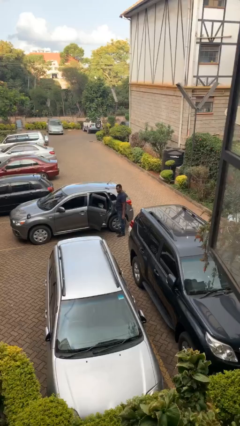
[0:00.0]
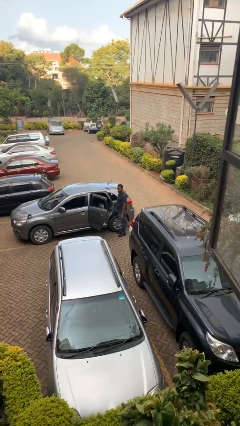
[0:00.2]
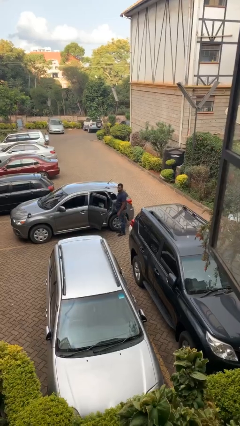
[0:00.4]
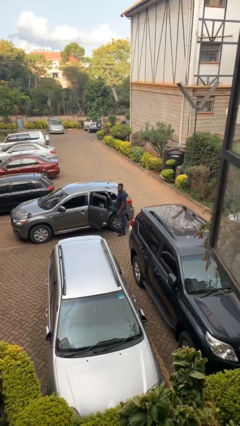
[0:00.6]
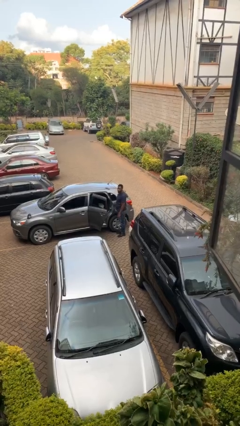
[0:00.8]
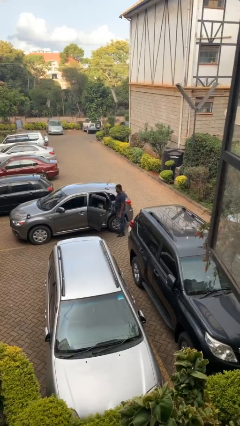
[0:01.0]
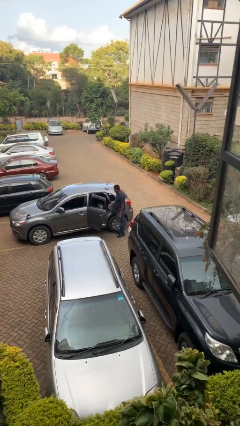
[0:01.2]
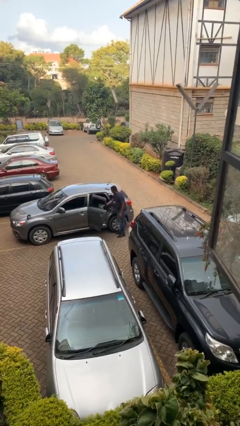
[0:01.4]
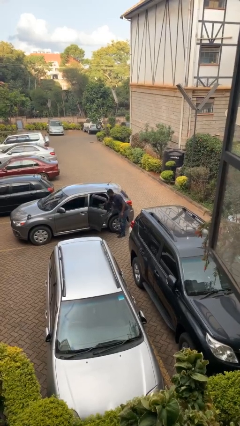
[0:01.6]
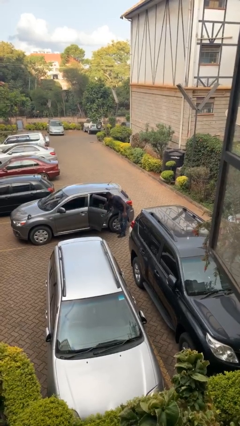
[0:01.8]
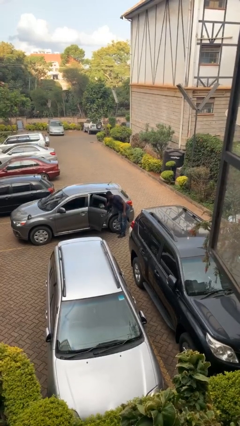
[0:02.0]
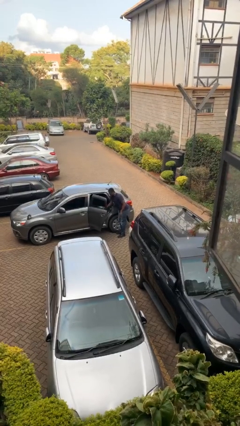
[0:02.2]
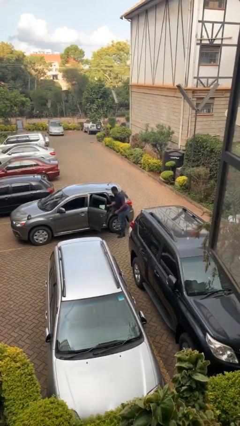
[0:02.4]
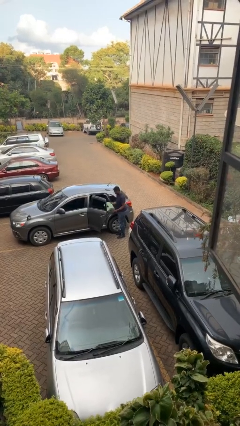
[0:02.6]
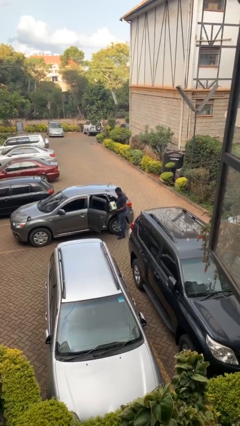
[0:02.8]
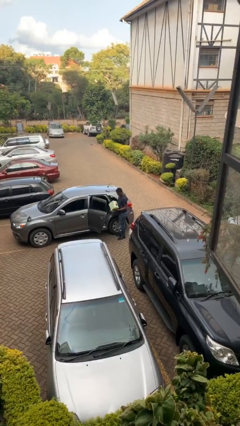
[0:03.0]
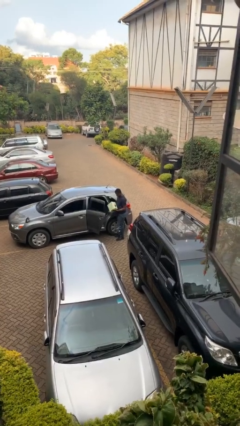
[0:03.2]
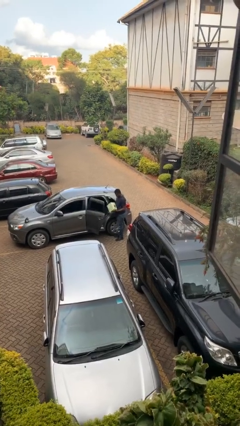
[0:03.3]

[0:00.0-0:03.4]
person unloads car

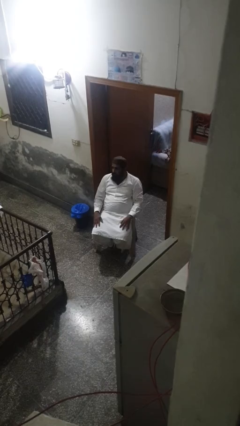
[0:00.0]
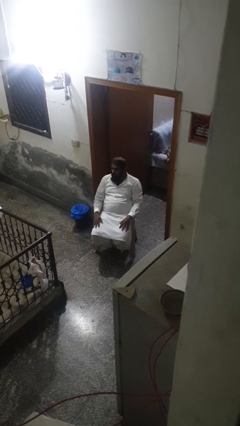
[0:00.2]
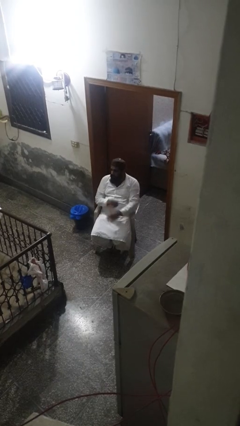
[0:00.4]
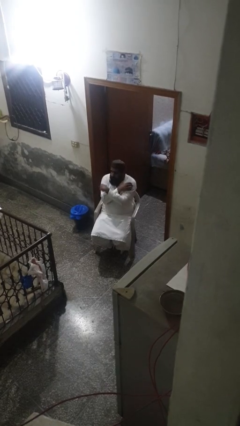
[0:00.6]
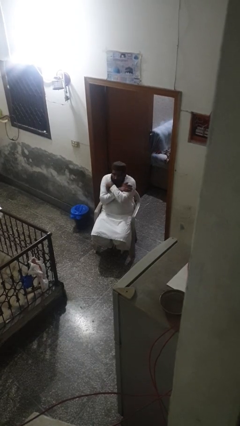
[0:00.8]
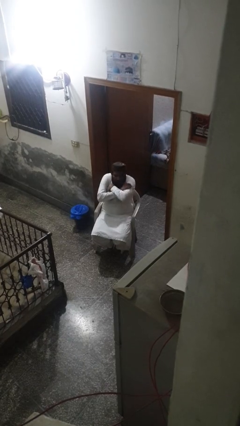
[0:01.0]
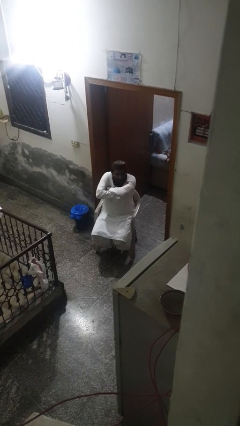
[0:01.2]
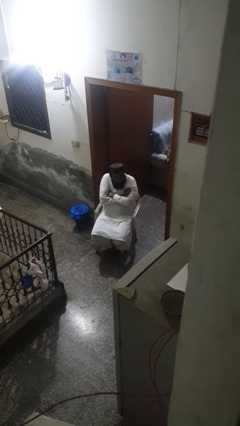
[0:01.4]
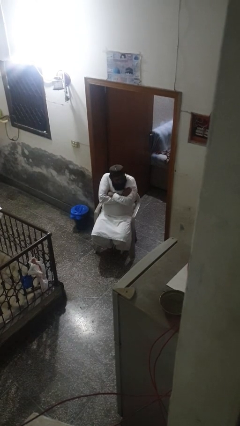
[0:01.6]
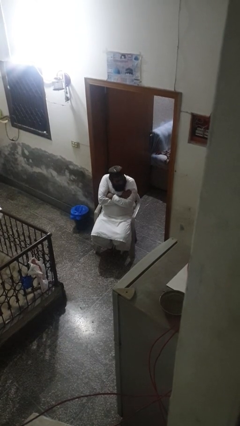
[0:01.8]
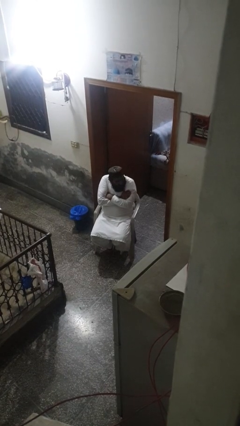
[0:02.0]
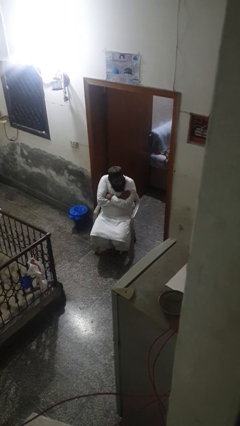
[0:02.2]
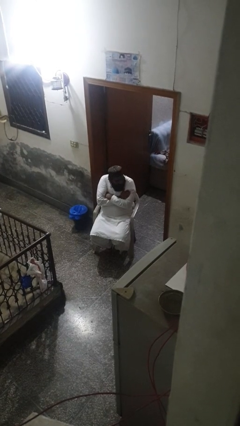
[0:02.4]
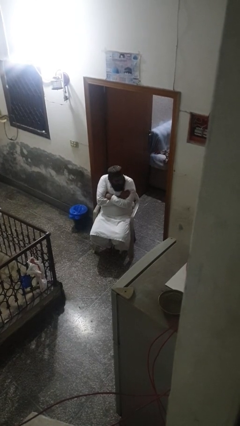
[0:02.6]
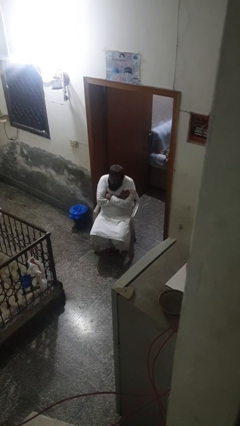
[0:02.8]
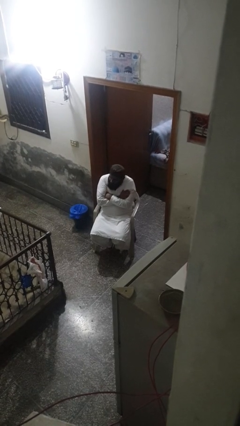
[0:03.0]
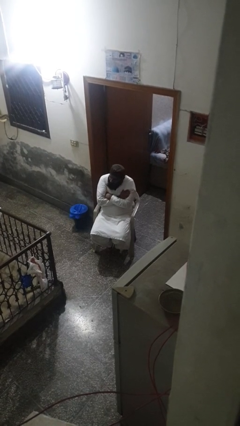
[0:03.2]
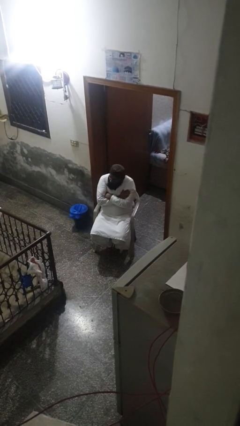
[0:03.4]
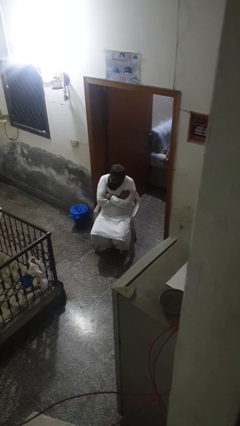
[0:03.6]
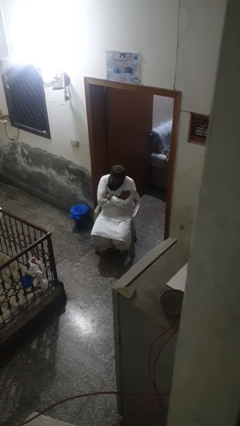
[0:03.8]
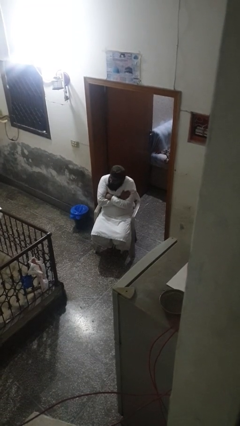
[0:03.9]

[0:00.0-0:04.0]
person crosses arms

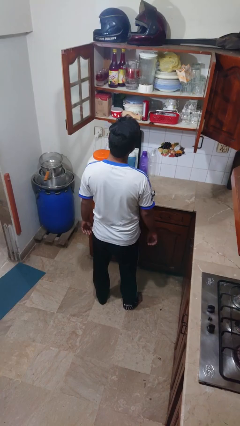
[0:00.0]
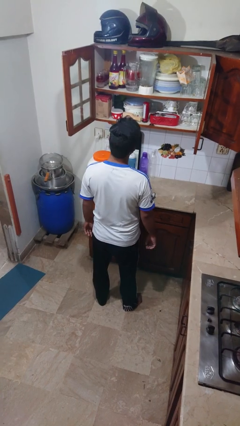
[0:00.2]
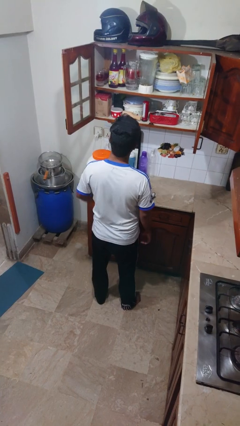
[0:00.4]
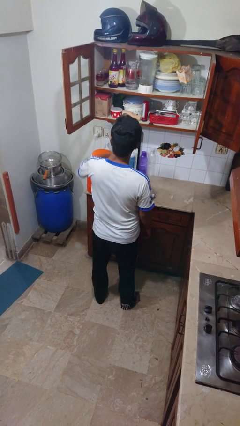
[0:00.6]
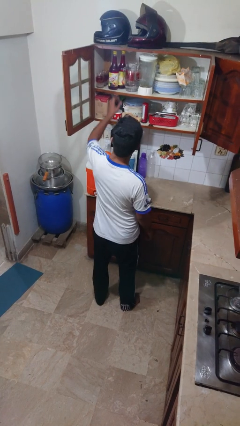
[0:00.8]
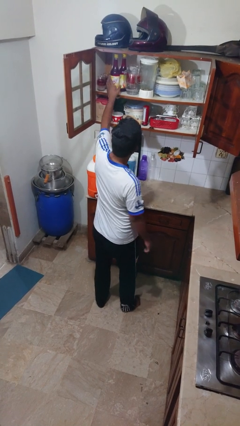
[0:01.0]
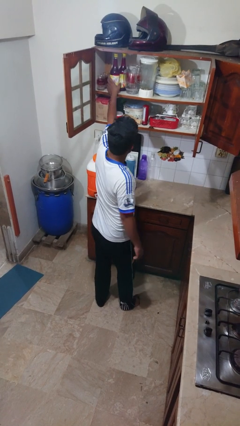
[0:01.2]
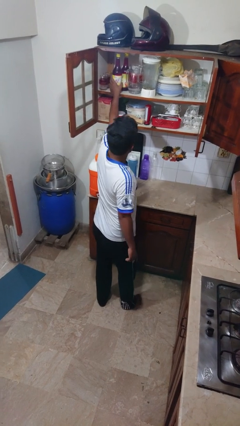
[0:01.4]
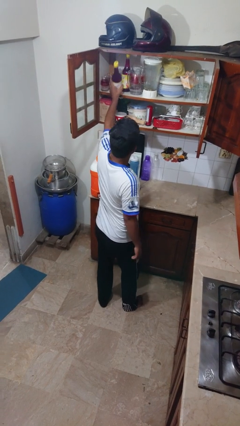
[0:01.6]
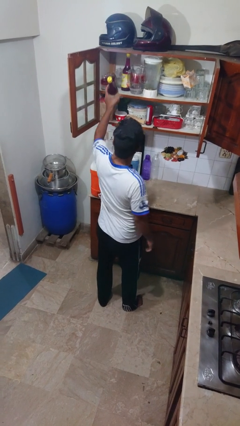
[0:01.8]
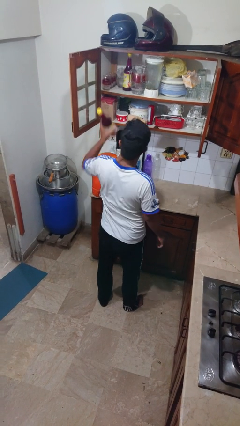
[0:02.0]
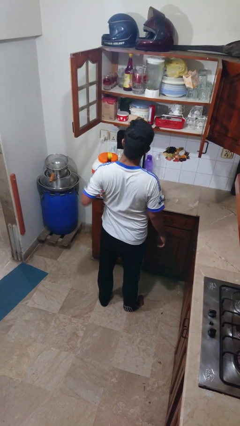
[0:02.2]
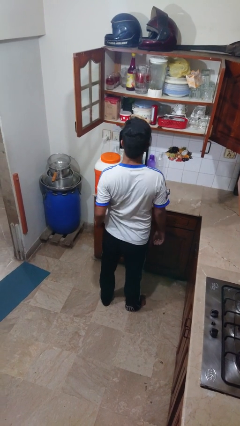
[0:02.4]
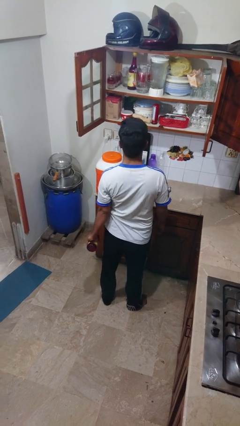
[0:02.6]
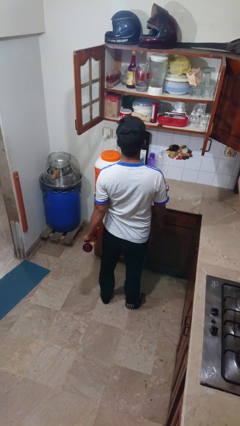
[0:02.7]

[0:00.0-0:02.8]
person picks up object from cabinet

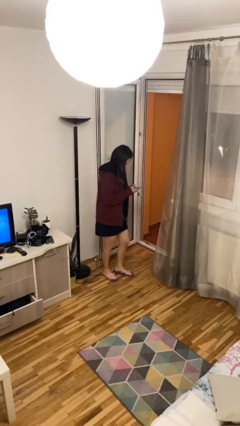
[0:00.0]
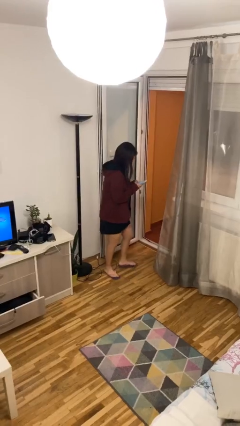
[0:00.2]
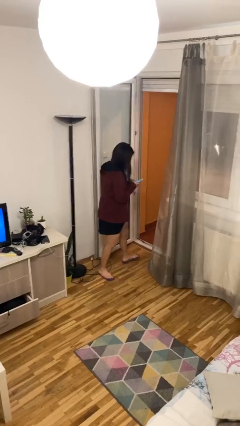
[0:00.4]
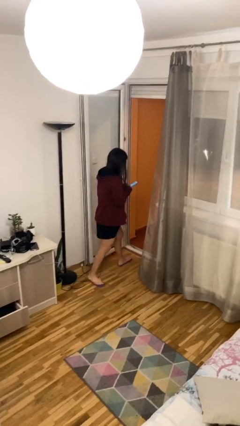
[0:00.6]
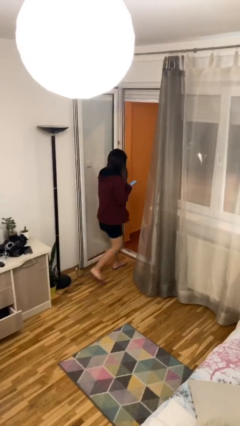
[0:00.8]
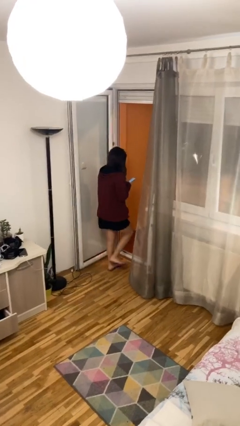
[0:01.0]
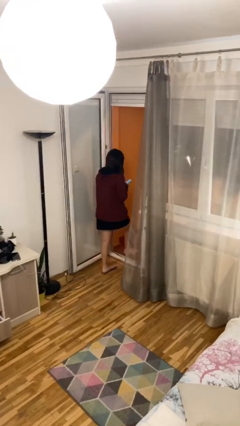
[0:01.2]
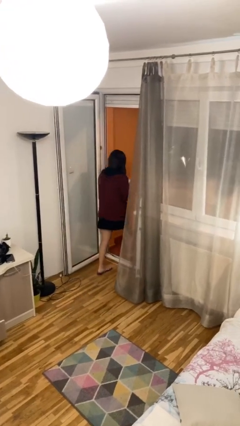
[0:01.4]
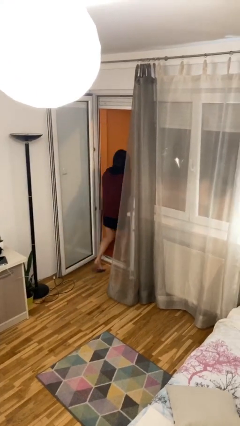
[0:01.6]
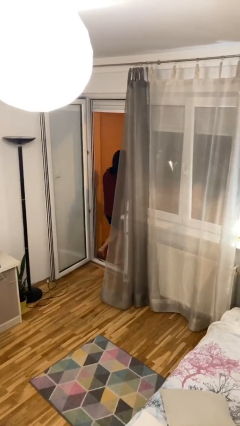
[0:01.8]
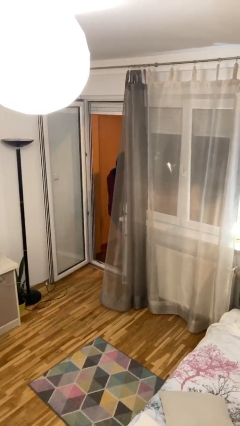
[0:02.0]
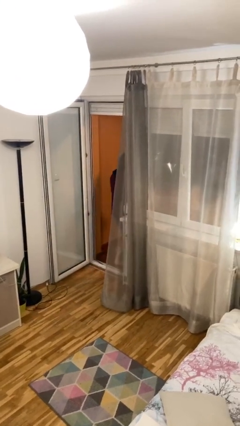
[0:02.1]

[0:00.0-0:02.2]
person exits scene through structure

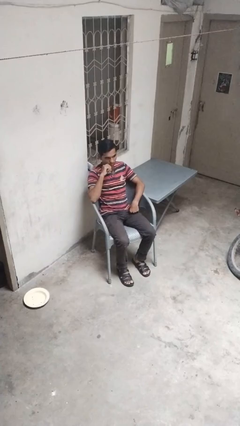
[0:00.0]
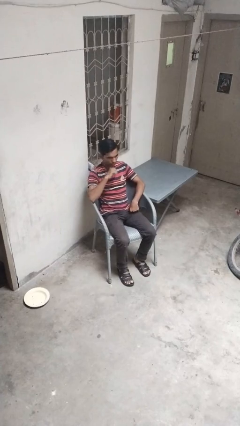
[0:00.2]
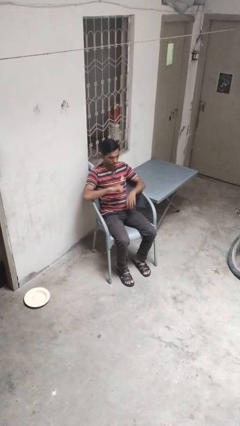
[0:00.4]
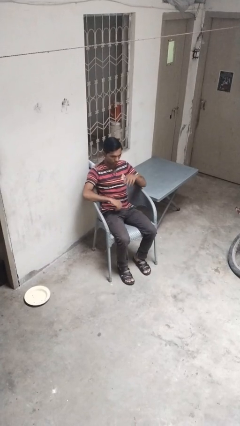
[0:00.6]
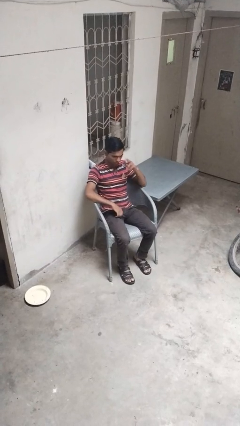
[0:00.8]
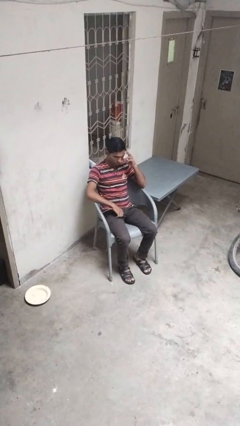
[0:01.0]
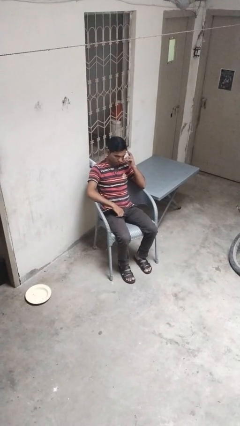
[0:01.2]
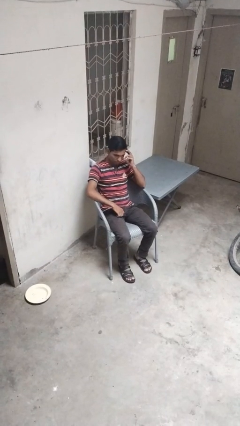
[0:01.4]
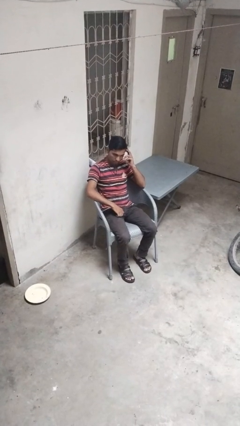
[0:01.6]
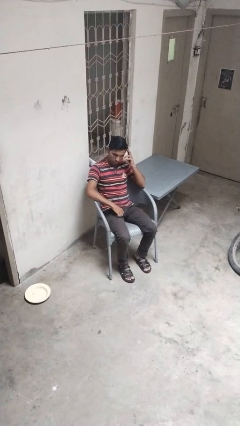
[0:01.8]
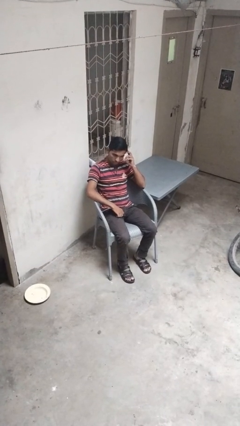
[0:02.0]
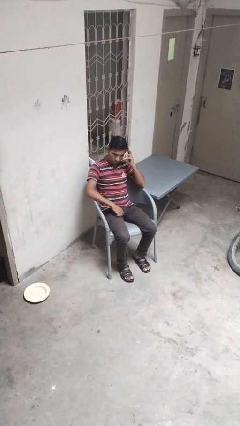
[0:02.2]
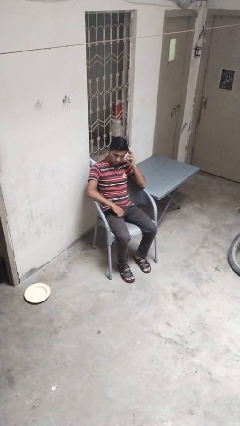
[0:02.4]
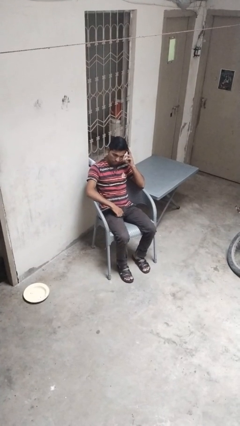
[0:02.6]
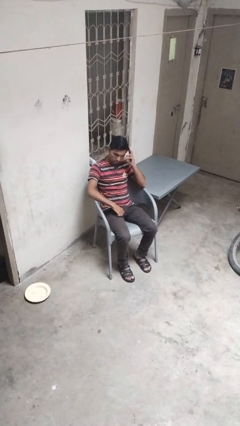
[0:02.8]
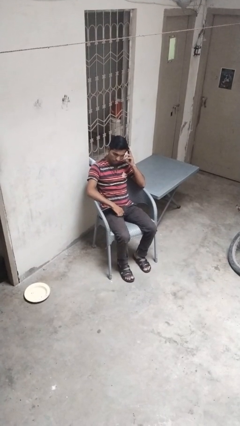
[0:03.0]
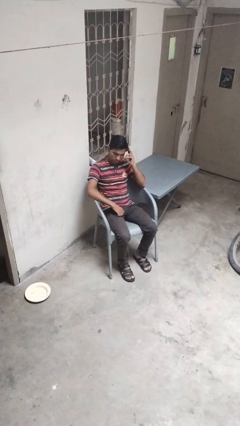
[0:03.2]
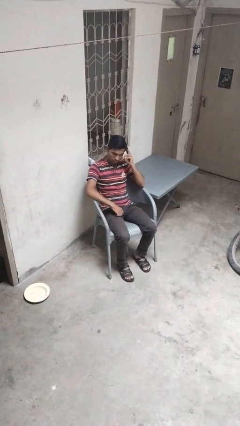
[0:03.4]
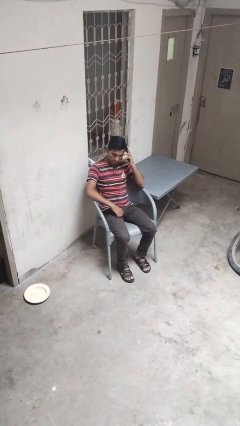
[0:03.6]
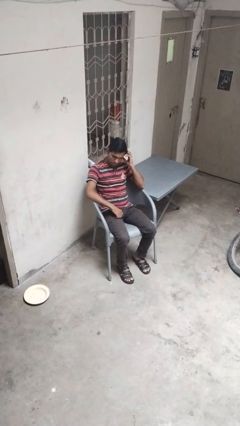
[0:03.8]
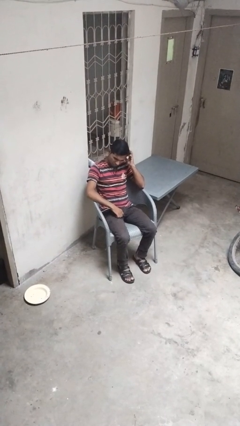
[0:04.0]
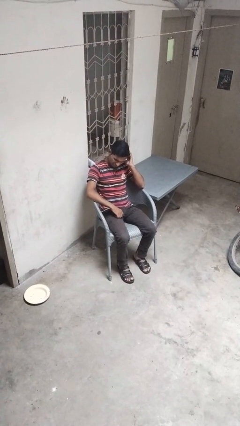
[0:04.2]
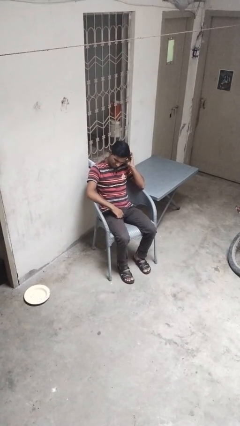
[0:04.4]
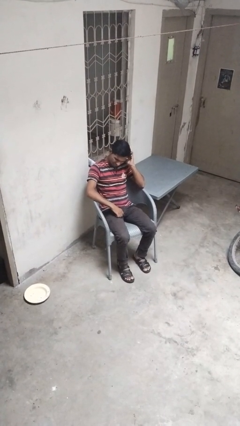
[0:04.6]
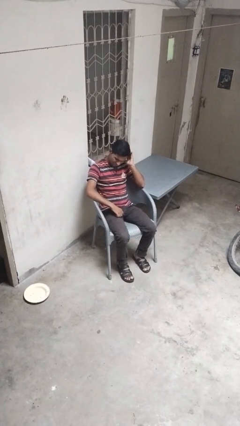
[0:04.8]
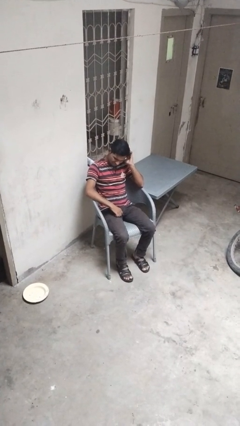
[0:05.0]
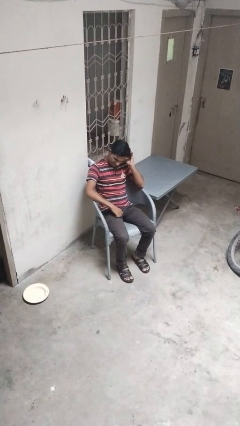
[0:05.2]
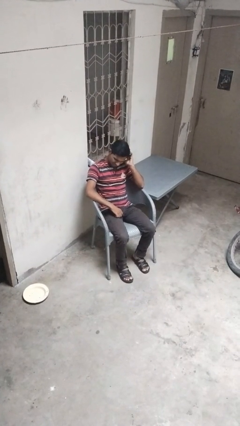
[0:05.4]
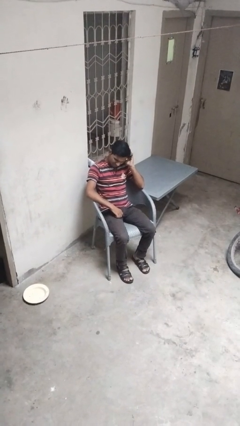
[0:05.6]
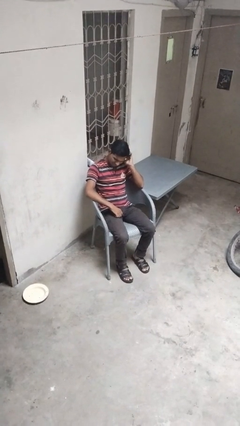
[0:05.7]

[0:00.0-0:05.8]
person strokes hair
